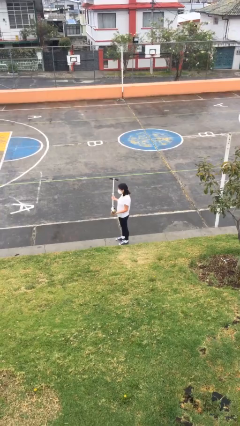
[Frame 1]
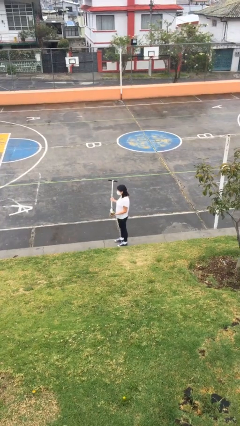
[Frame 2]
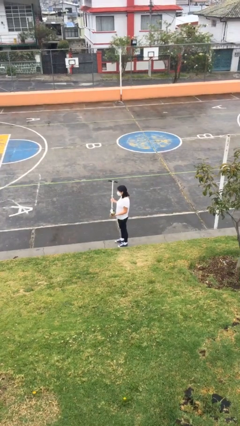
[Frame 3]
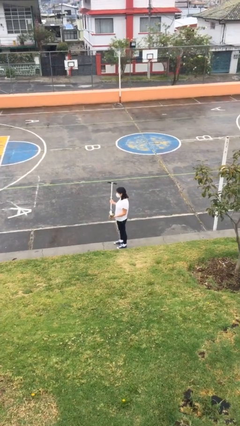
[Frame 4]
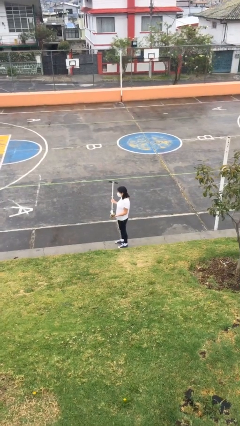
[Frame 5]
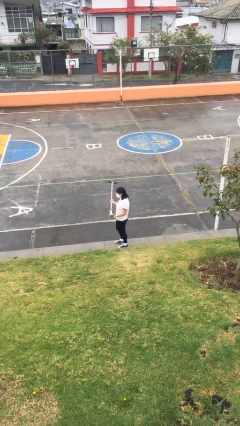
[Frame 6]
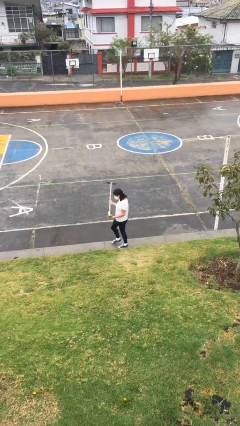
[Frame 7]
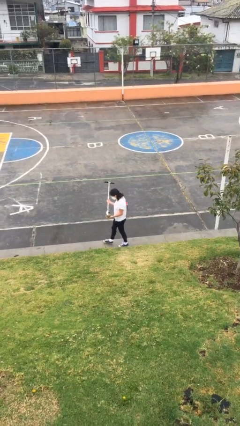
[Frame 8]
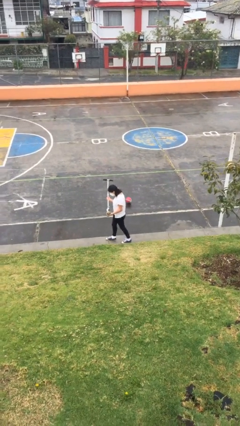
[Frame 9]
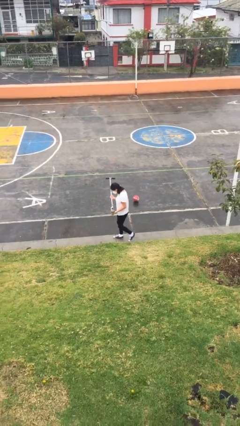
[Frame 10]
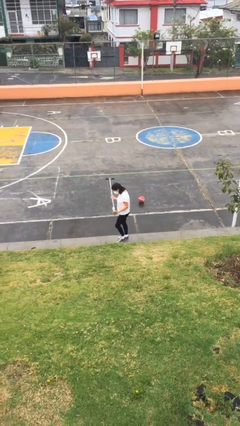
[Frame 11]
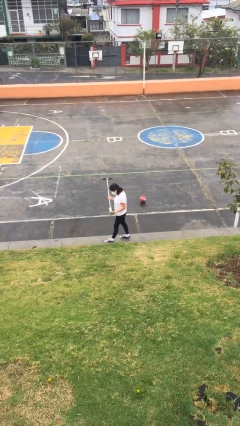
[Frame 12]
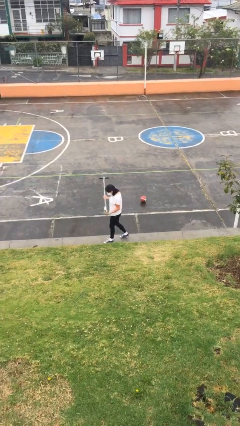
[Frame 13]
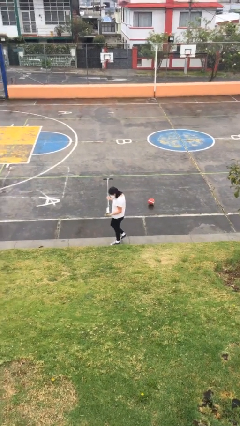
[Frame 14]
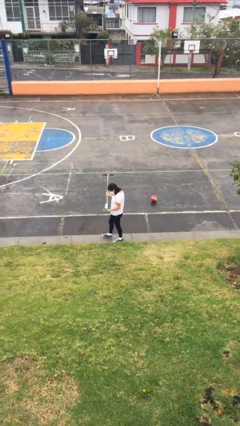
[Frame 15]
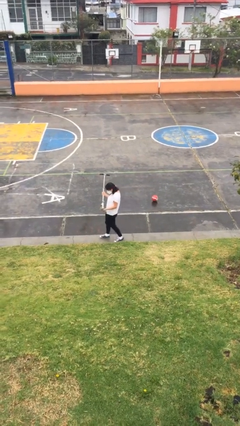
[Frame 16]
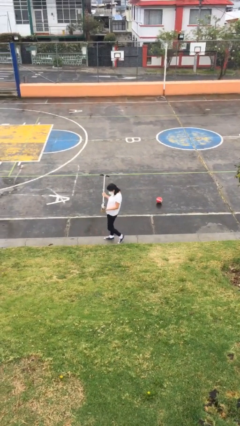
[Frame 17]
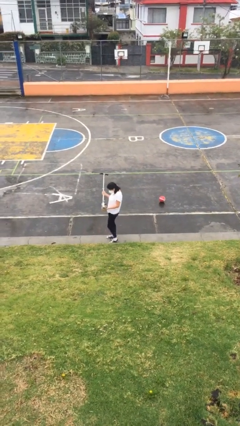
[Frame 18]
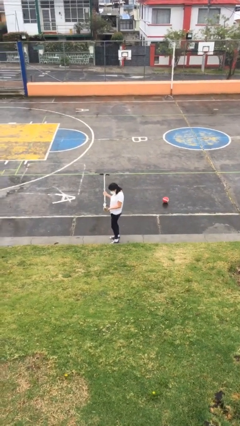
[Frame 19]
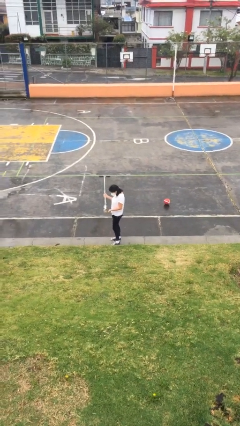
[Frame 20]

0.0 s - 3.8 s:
person carries heavy object

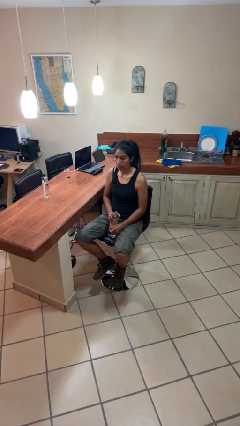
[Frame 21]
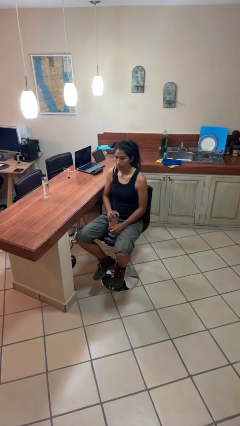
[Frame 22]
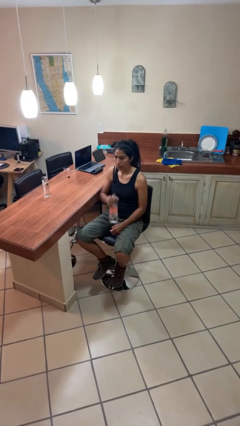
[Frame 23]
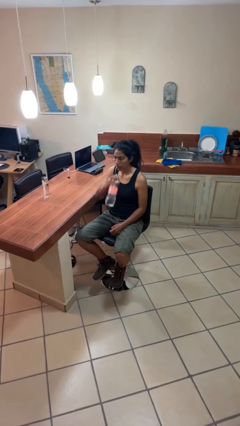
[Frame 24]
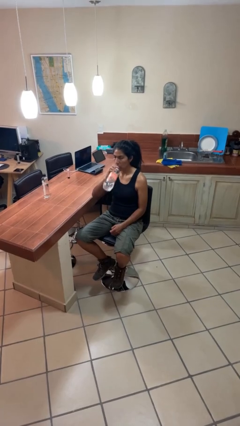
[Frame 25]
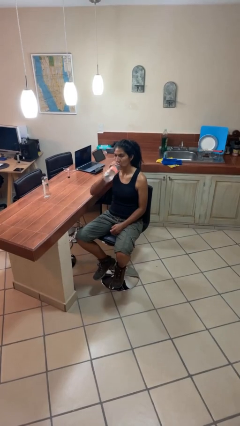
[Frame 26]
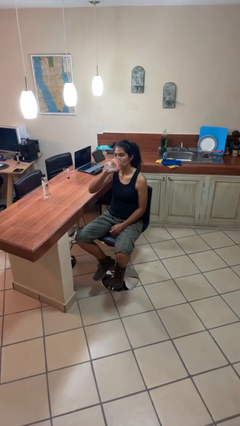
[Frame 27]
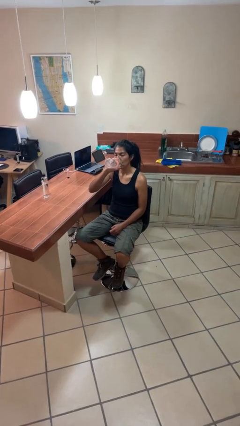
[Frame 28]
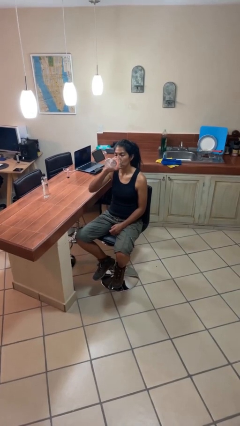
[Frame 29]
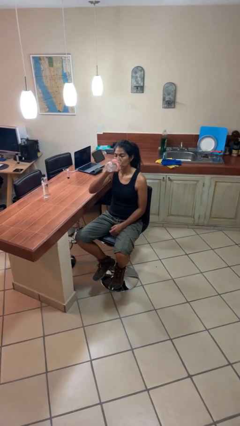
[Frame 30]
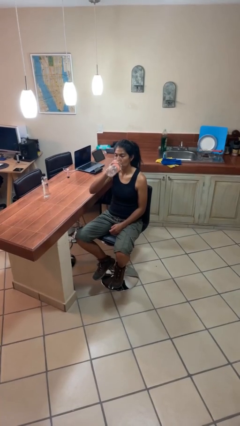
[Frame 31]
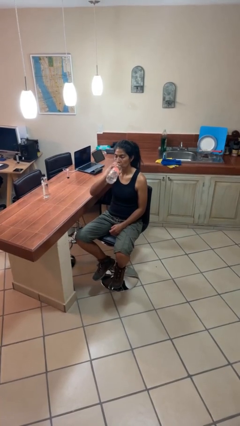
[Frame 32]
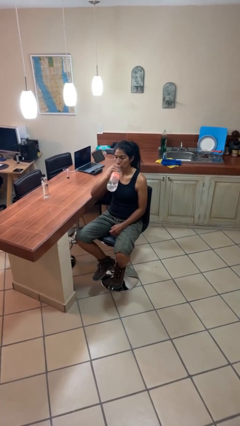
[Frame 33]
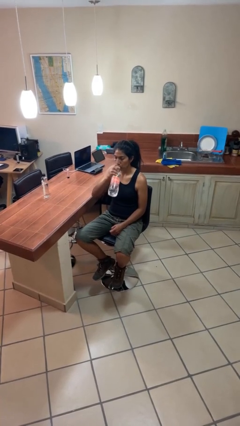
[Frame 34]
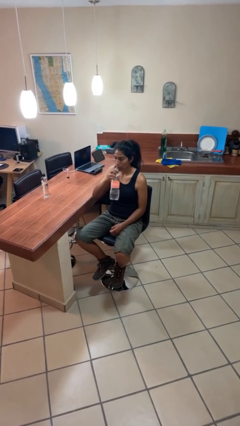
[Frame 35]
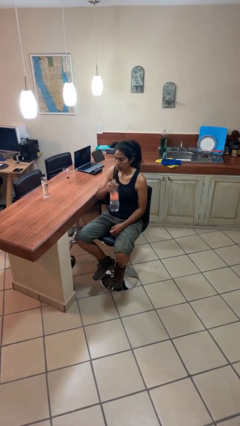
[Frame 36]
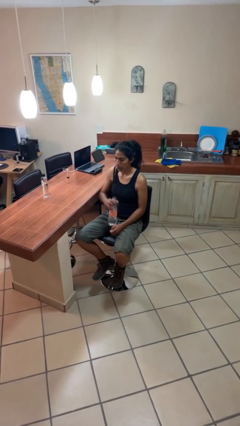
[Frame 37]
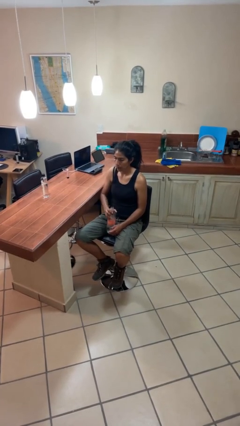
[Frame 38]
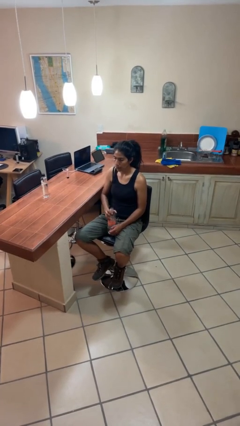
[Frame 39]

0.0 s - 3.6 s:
person drinks from bottle

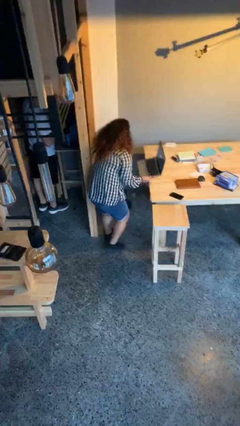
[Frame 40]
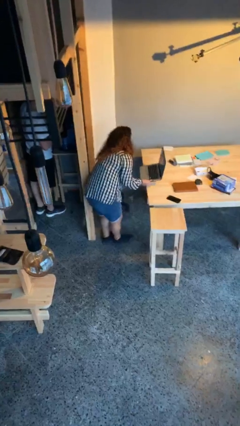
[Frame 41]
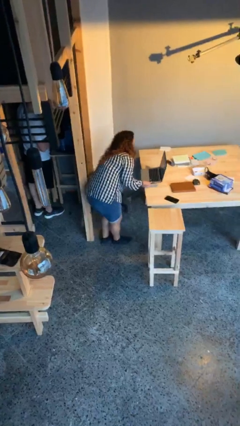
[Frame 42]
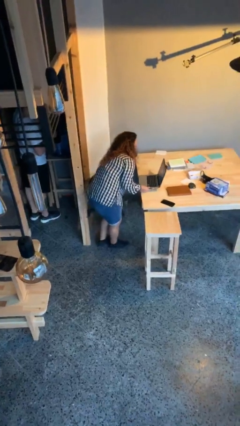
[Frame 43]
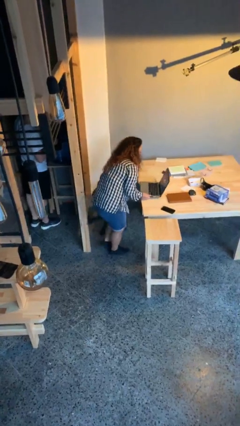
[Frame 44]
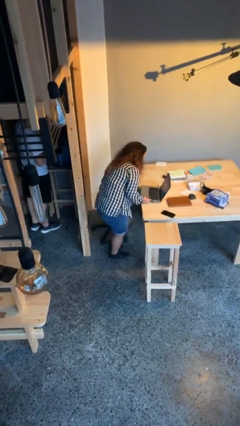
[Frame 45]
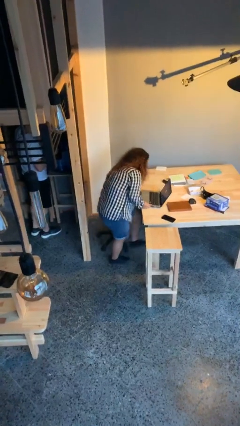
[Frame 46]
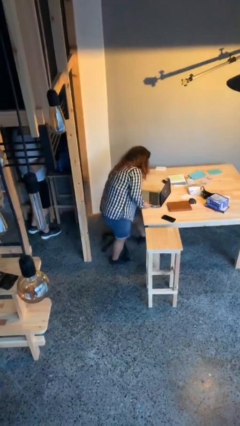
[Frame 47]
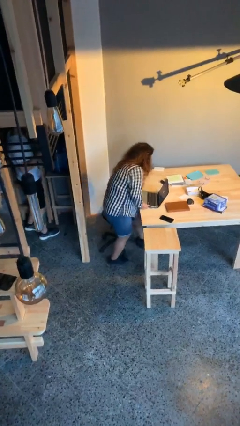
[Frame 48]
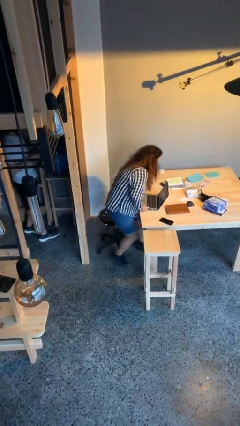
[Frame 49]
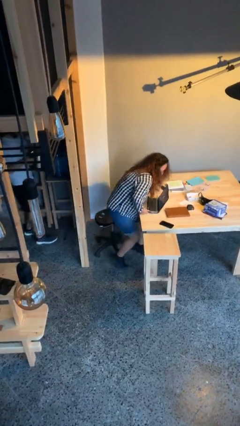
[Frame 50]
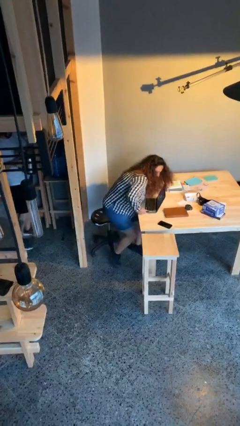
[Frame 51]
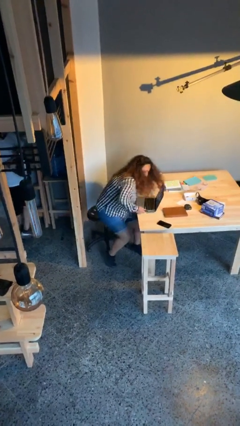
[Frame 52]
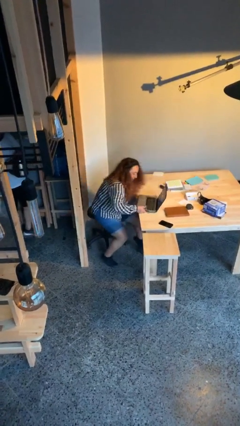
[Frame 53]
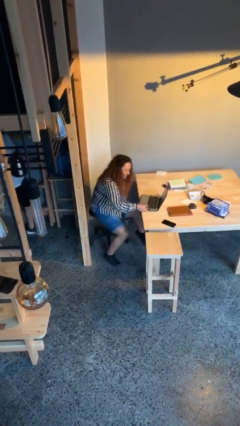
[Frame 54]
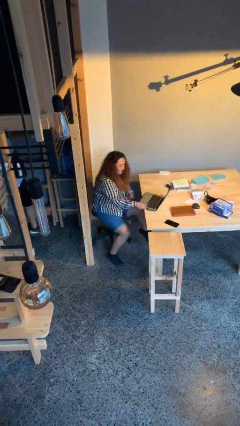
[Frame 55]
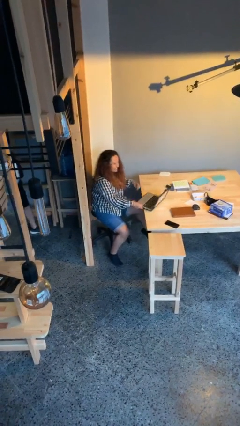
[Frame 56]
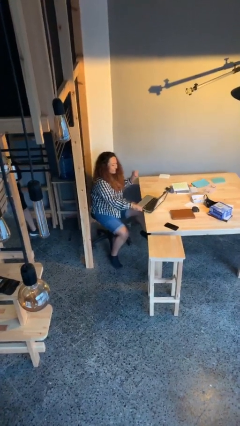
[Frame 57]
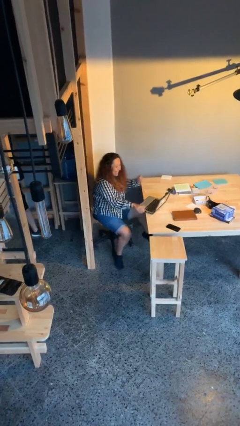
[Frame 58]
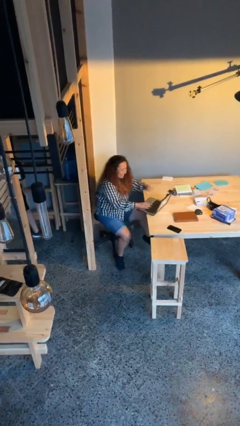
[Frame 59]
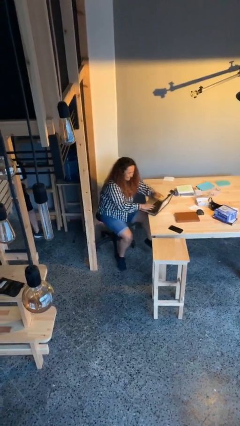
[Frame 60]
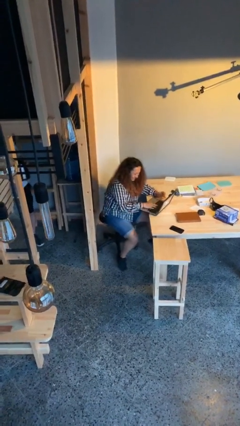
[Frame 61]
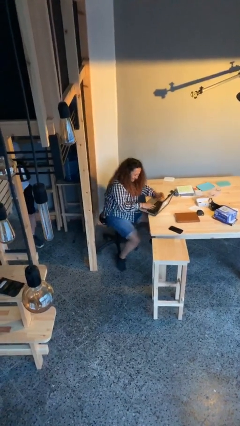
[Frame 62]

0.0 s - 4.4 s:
person sits down

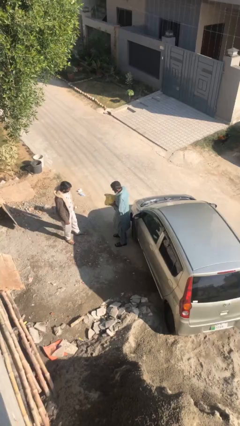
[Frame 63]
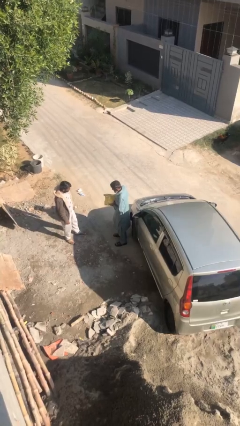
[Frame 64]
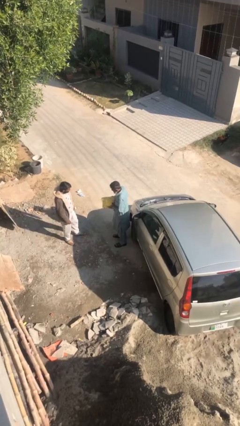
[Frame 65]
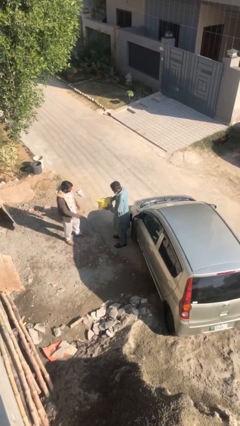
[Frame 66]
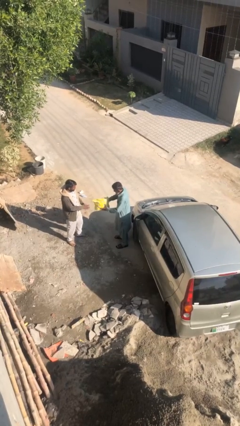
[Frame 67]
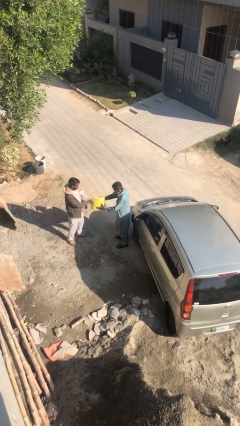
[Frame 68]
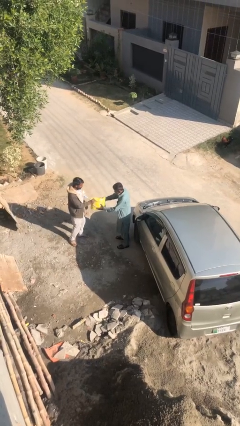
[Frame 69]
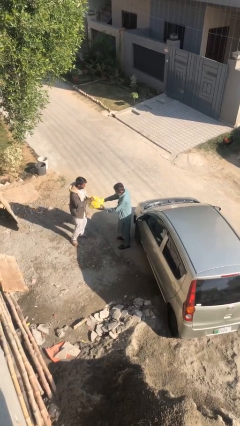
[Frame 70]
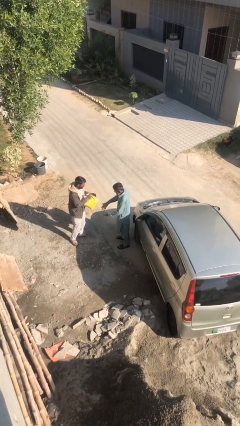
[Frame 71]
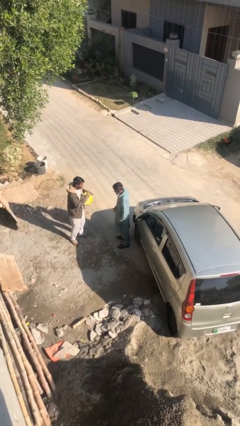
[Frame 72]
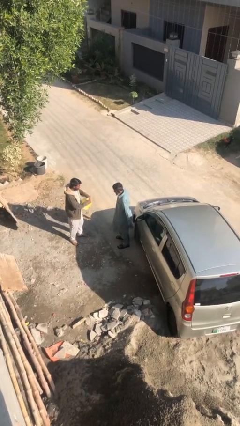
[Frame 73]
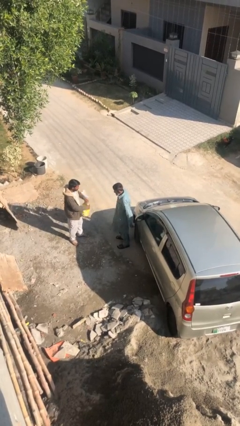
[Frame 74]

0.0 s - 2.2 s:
person transfers object to person

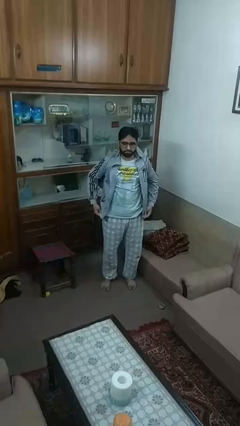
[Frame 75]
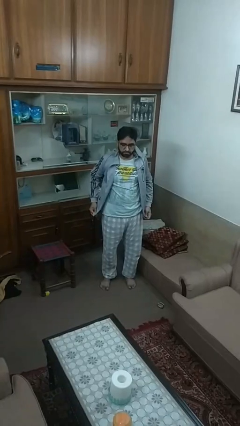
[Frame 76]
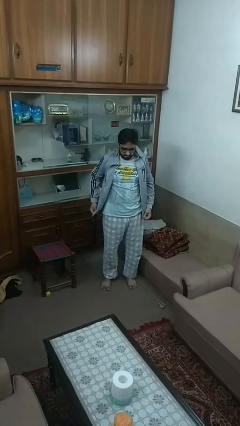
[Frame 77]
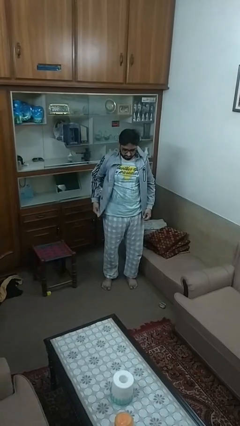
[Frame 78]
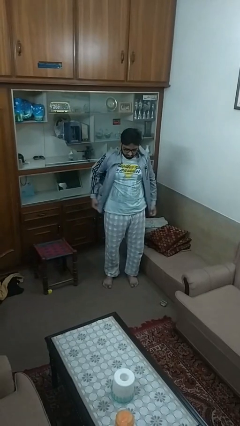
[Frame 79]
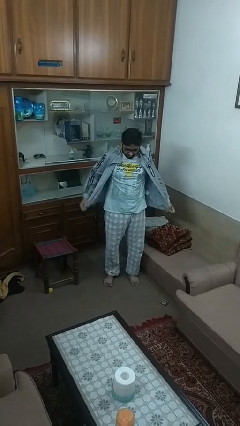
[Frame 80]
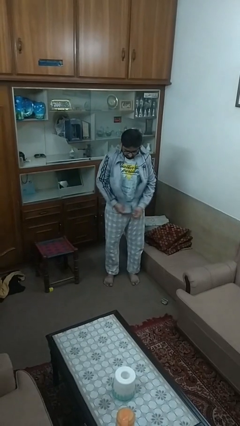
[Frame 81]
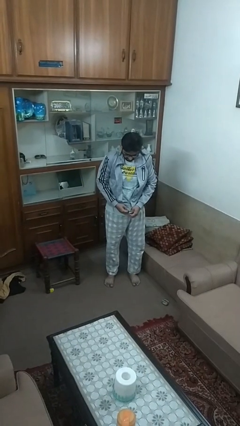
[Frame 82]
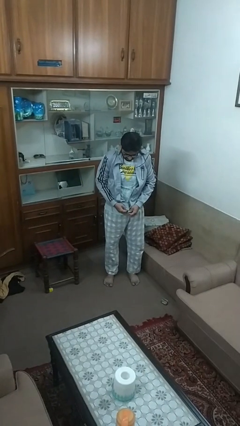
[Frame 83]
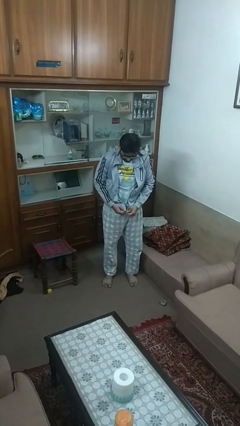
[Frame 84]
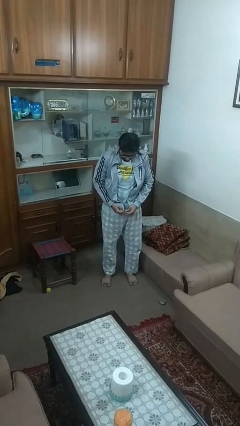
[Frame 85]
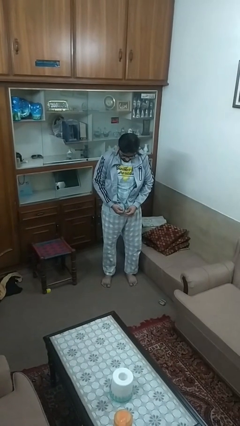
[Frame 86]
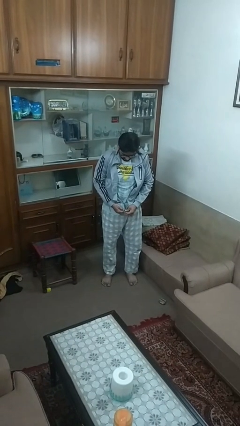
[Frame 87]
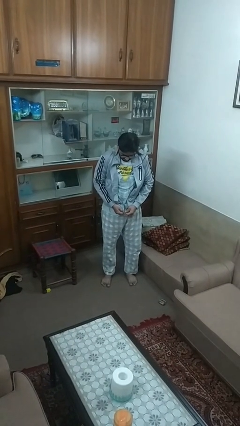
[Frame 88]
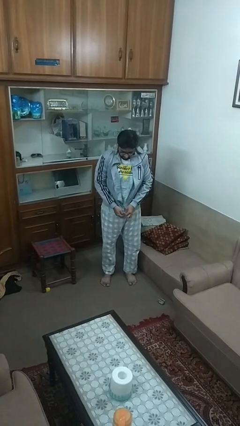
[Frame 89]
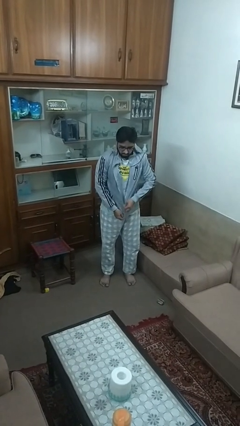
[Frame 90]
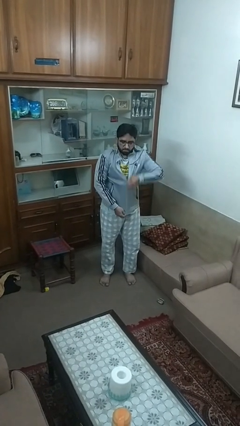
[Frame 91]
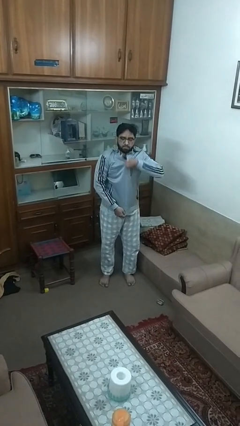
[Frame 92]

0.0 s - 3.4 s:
person zips up jacket

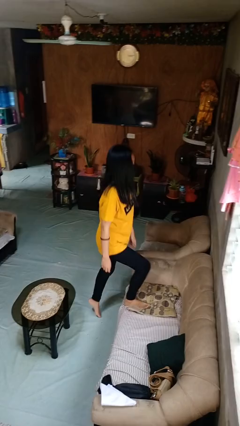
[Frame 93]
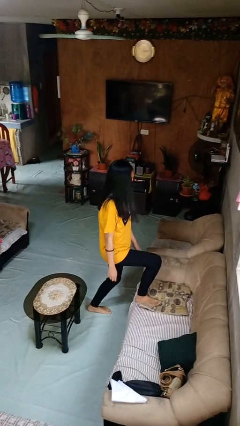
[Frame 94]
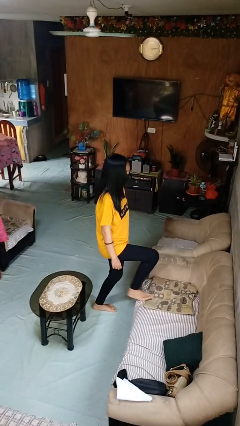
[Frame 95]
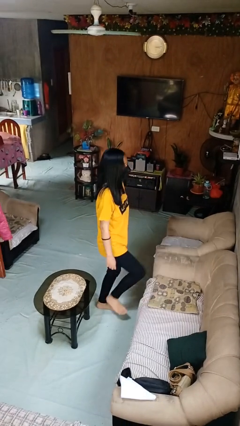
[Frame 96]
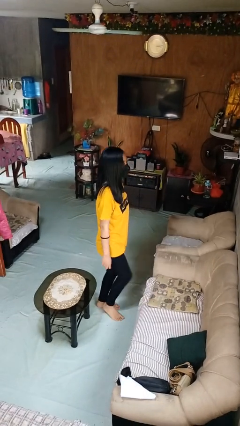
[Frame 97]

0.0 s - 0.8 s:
person climbs off couch
